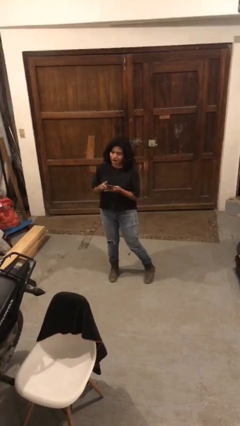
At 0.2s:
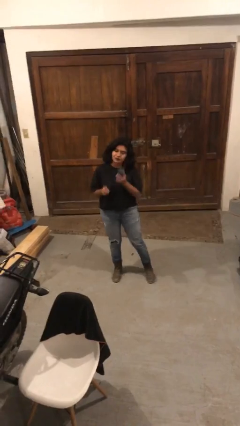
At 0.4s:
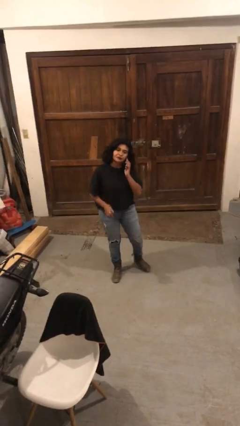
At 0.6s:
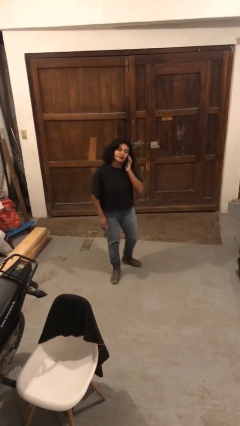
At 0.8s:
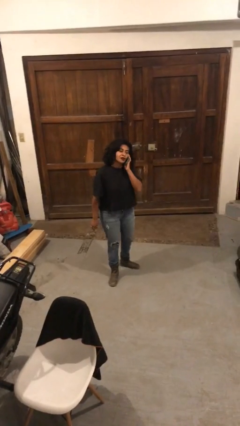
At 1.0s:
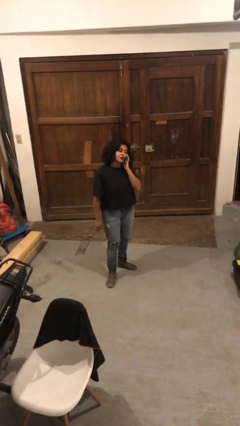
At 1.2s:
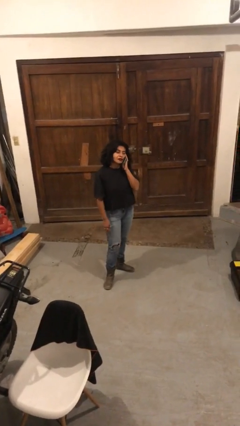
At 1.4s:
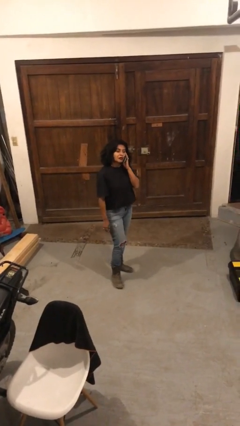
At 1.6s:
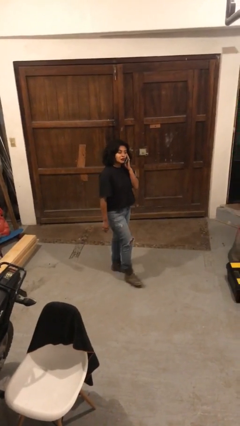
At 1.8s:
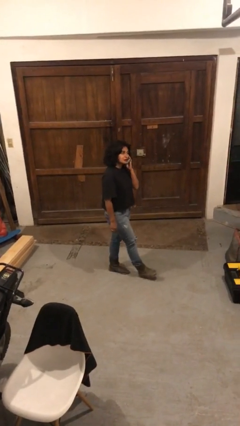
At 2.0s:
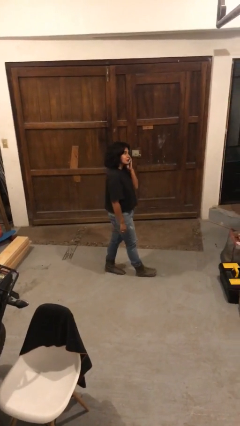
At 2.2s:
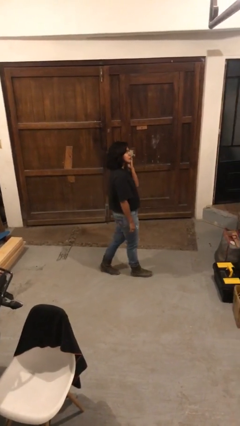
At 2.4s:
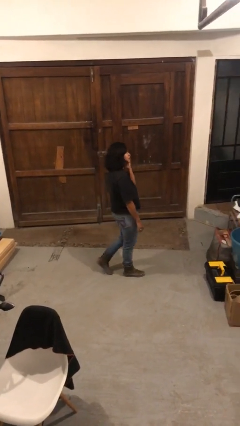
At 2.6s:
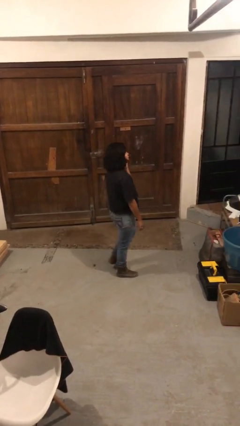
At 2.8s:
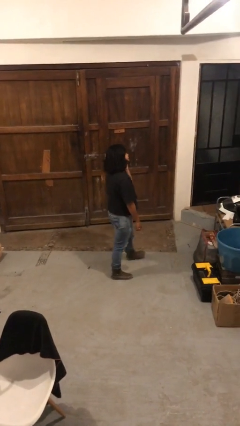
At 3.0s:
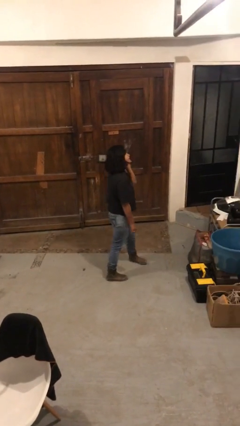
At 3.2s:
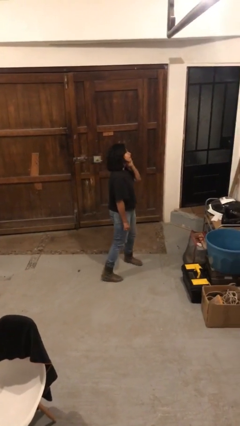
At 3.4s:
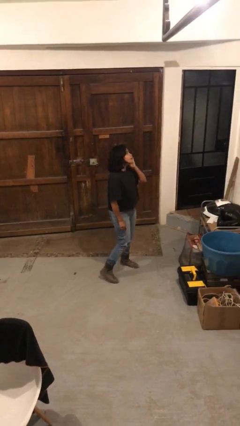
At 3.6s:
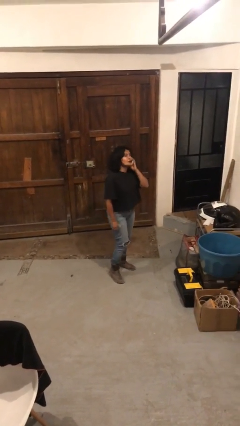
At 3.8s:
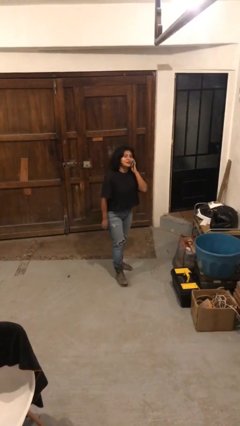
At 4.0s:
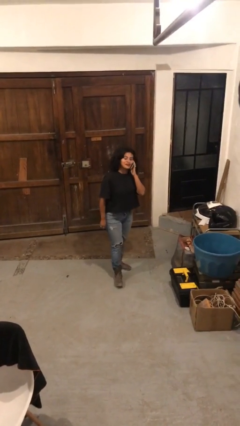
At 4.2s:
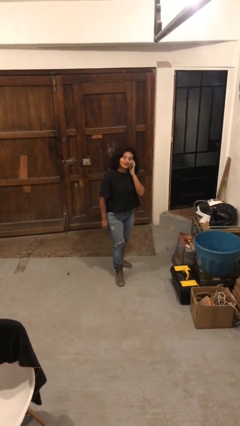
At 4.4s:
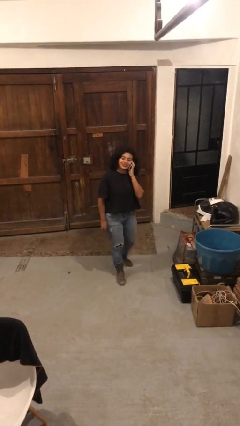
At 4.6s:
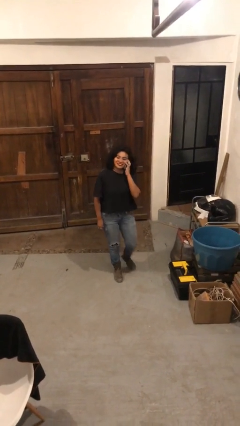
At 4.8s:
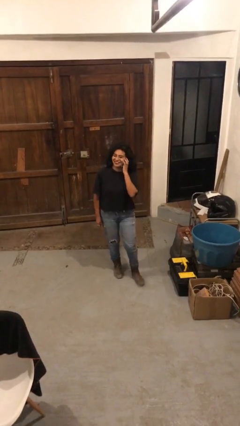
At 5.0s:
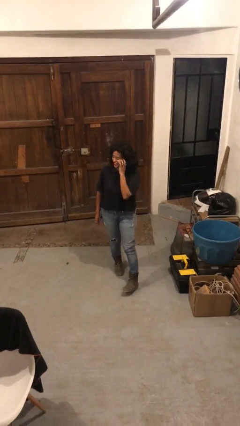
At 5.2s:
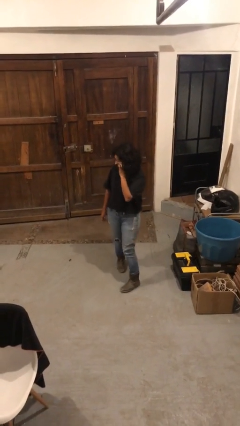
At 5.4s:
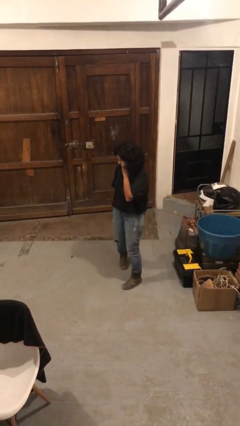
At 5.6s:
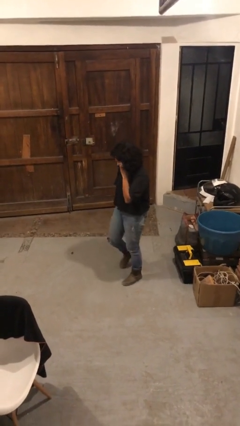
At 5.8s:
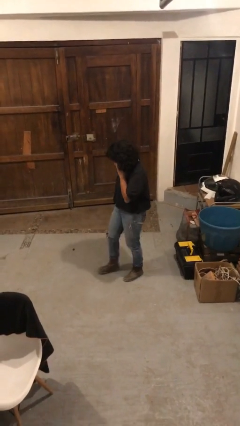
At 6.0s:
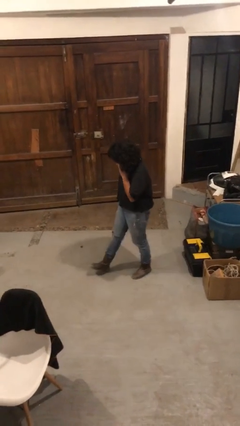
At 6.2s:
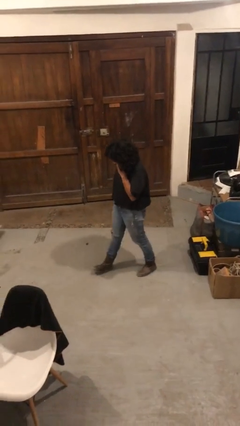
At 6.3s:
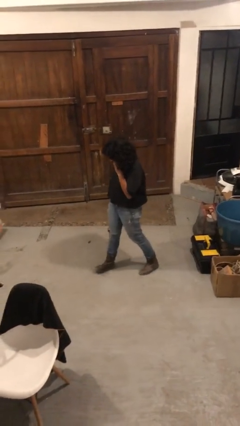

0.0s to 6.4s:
person talks on phone

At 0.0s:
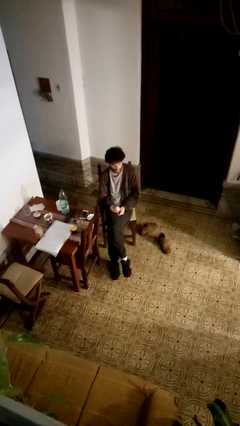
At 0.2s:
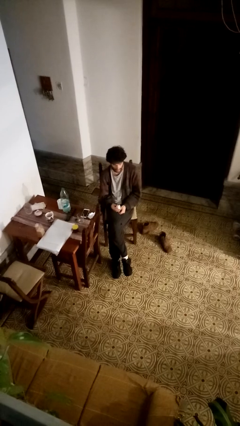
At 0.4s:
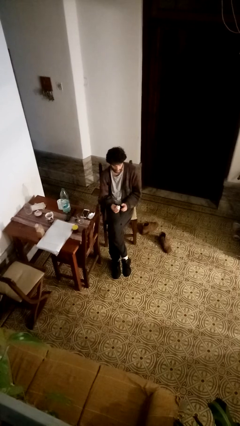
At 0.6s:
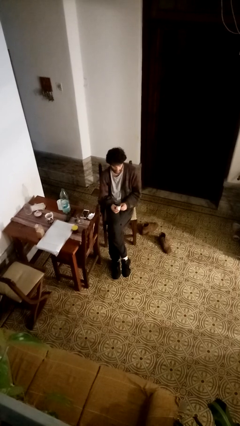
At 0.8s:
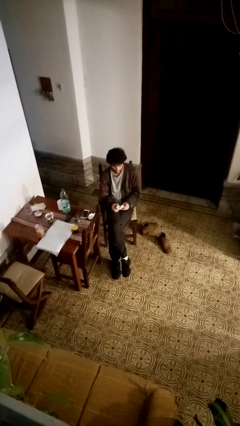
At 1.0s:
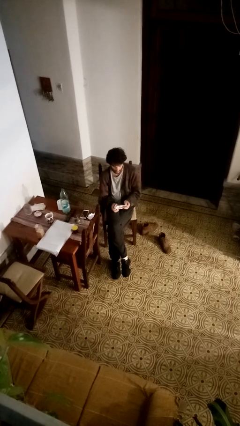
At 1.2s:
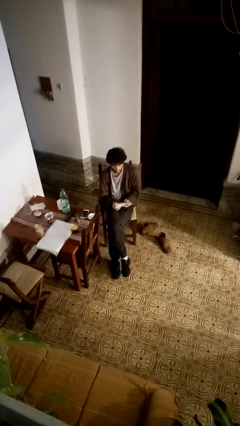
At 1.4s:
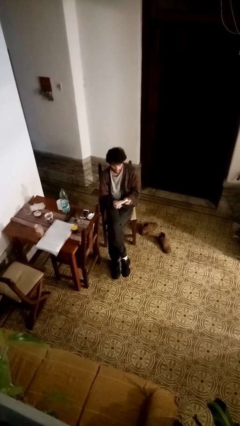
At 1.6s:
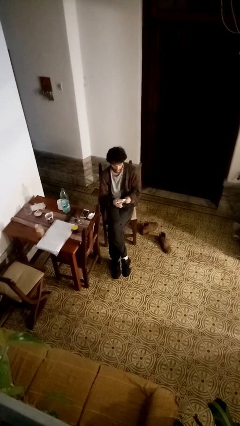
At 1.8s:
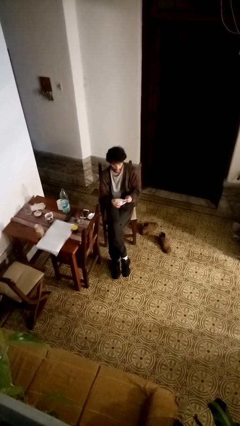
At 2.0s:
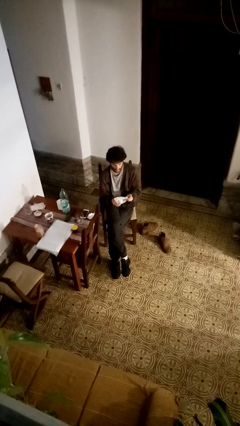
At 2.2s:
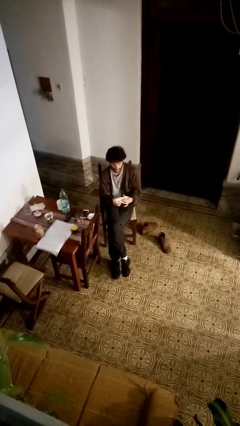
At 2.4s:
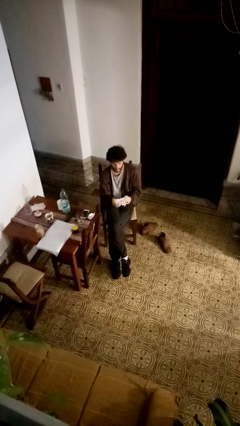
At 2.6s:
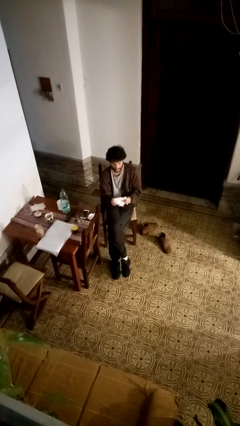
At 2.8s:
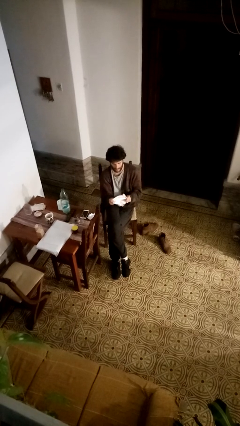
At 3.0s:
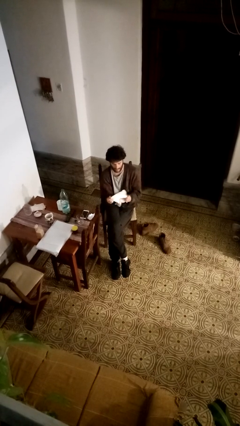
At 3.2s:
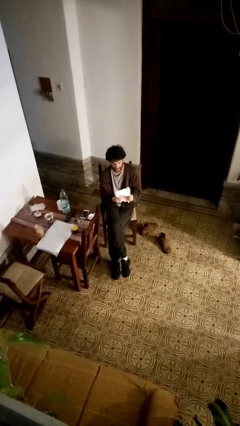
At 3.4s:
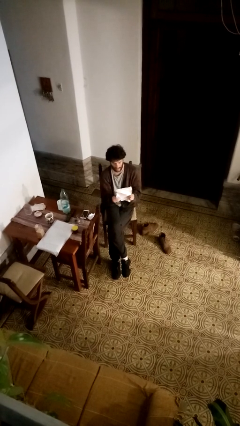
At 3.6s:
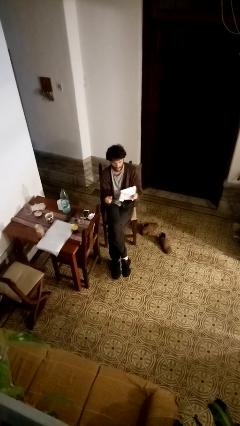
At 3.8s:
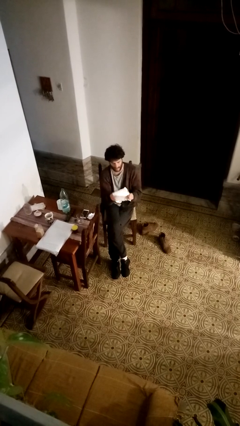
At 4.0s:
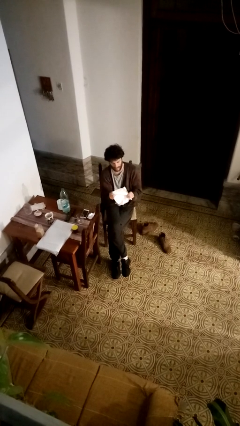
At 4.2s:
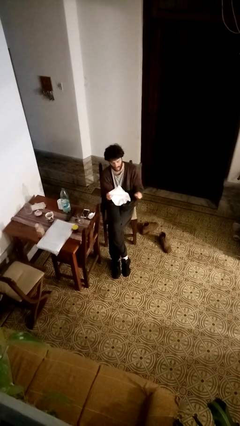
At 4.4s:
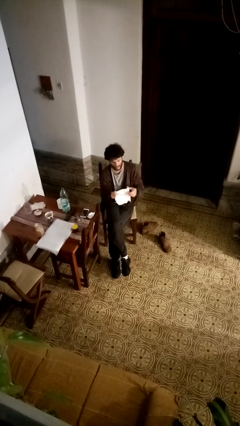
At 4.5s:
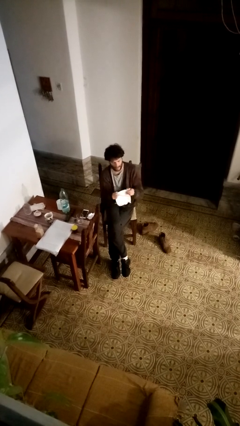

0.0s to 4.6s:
person crumples paper

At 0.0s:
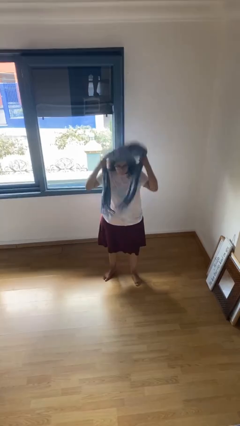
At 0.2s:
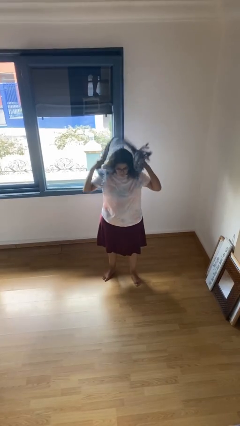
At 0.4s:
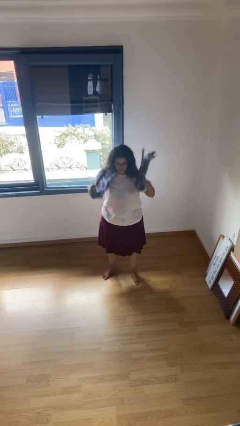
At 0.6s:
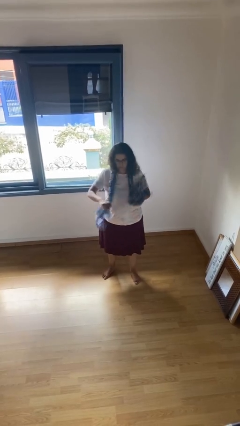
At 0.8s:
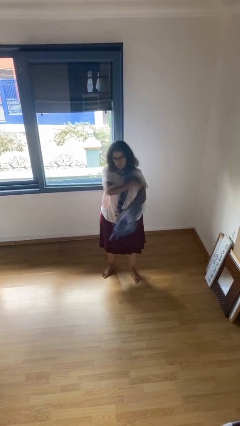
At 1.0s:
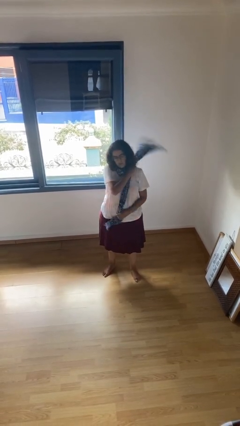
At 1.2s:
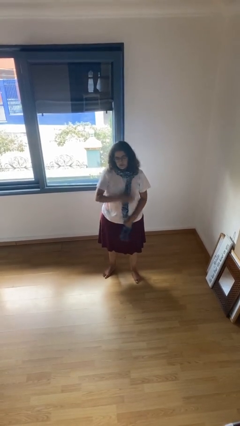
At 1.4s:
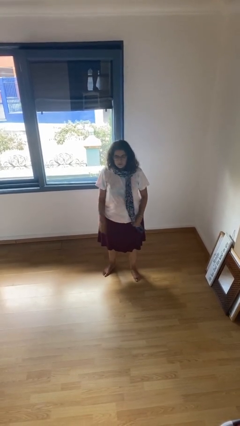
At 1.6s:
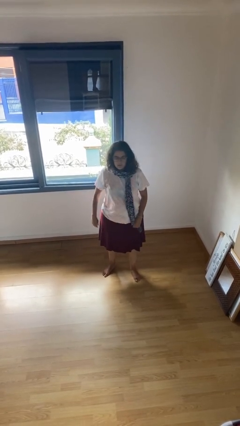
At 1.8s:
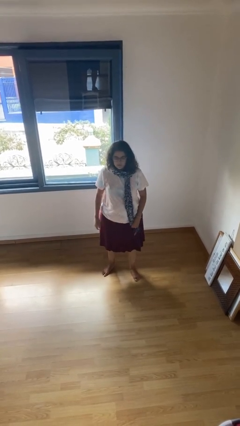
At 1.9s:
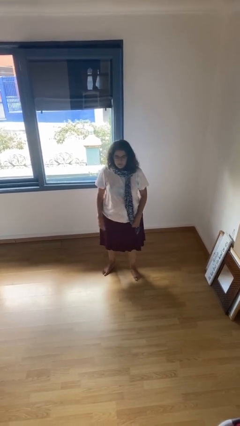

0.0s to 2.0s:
person puts on scarf

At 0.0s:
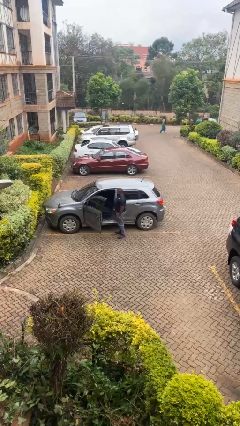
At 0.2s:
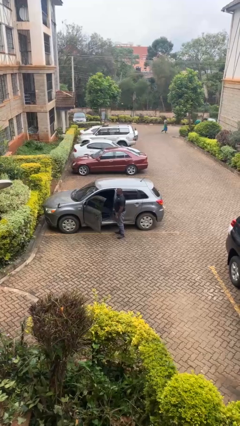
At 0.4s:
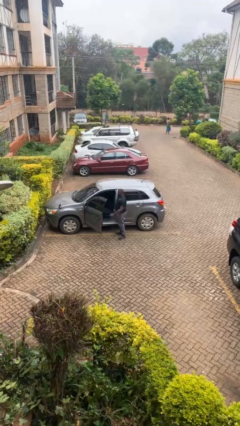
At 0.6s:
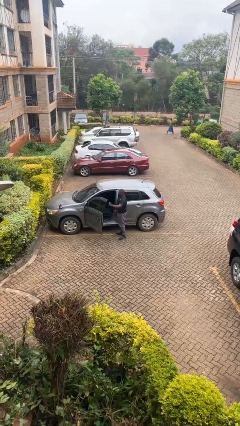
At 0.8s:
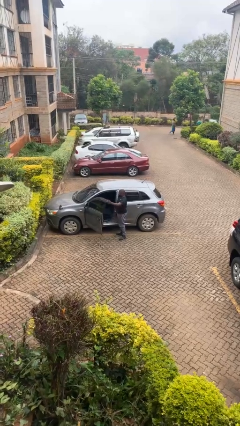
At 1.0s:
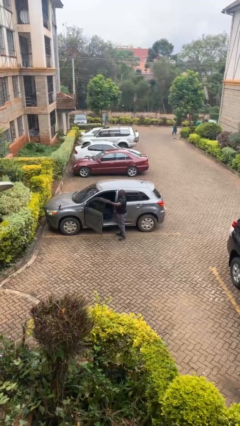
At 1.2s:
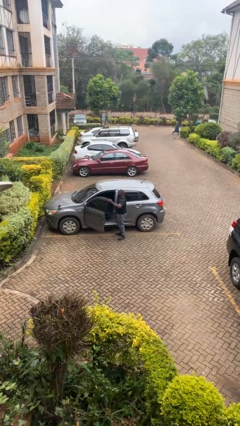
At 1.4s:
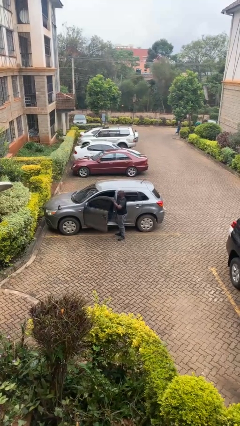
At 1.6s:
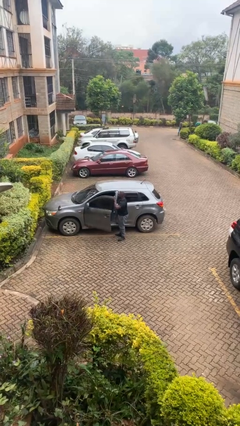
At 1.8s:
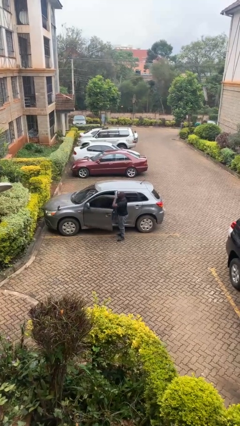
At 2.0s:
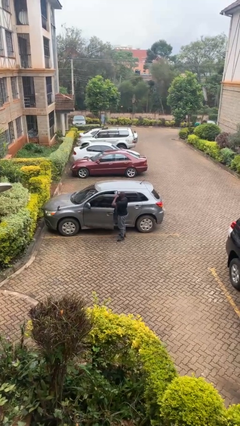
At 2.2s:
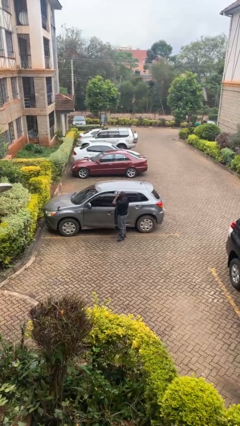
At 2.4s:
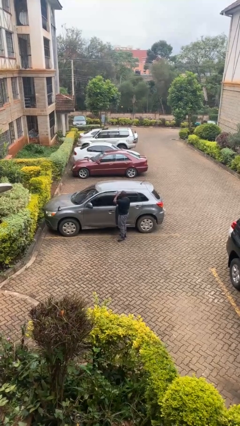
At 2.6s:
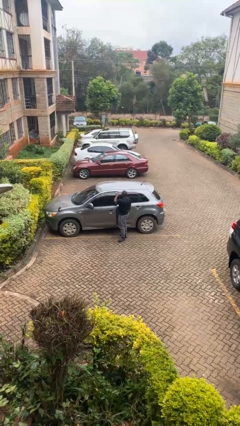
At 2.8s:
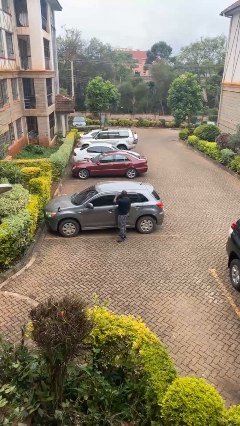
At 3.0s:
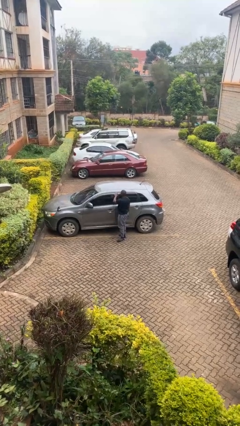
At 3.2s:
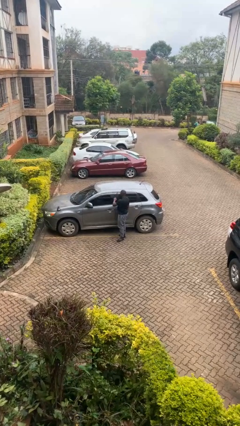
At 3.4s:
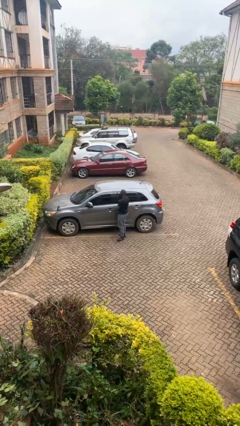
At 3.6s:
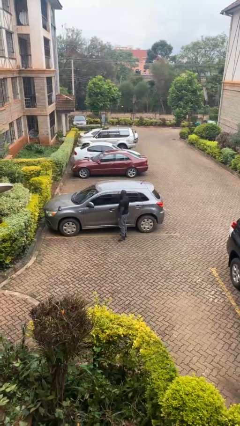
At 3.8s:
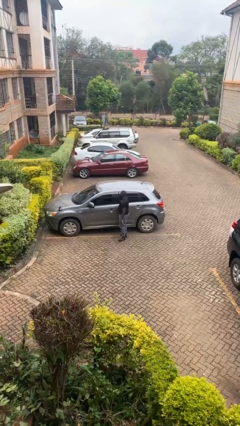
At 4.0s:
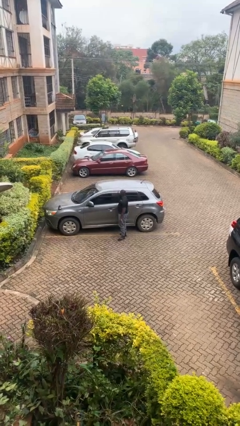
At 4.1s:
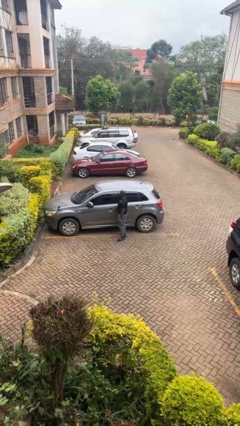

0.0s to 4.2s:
person closes car door

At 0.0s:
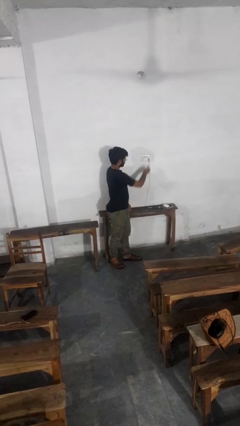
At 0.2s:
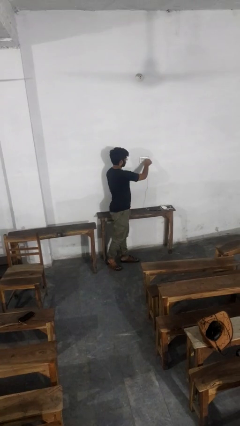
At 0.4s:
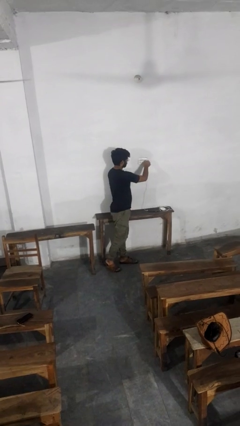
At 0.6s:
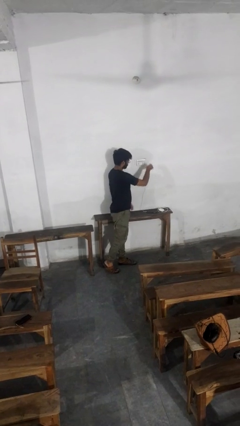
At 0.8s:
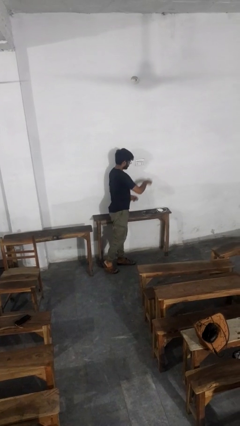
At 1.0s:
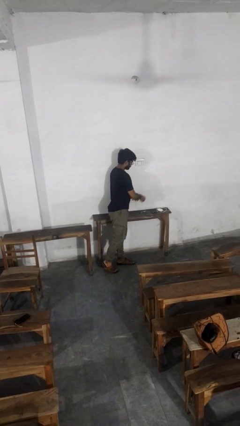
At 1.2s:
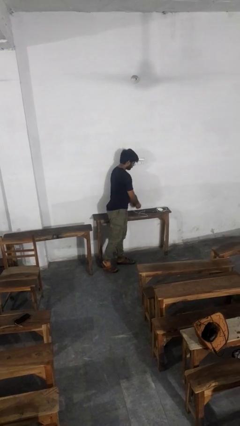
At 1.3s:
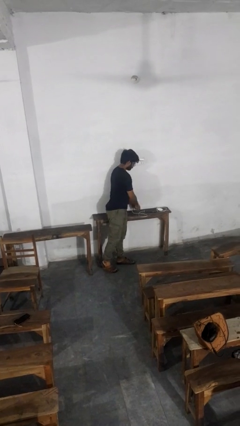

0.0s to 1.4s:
person unplugs from electrical socket
